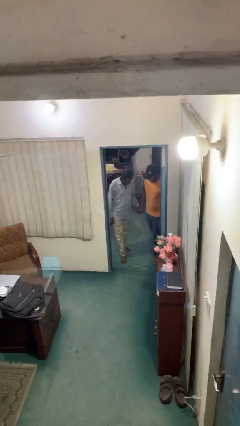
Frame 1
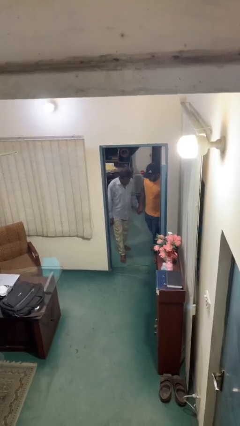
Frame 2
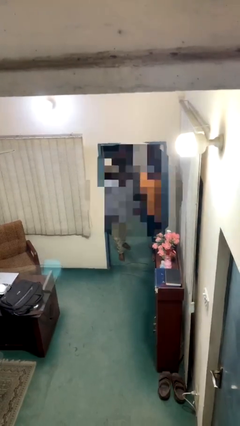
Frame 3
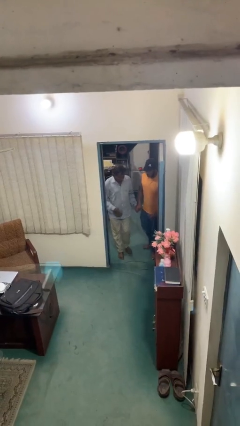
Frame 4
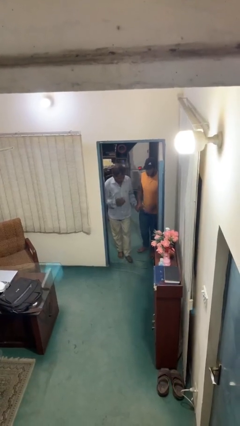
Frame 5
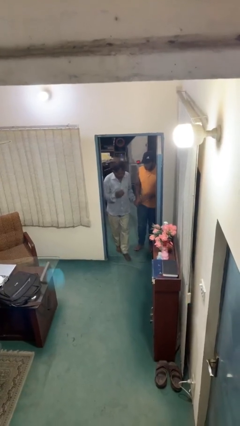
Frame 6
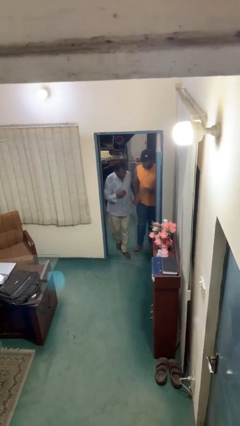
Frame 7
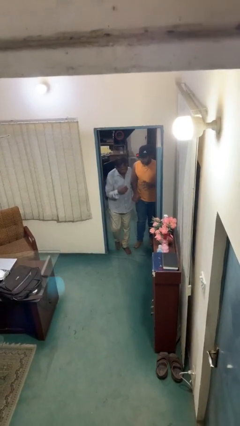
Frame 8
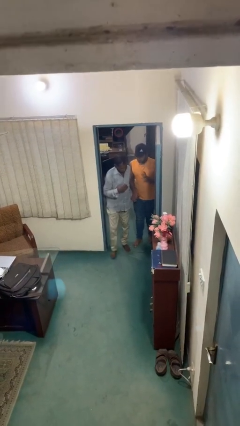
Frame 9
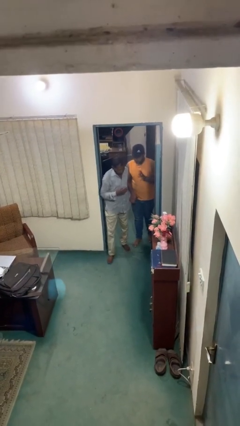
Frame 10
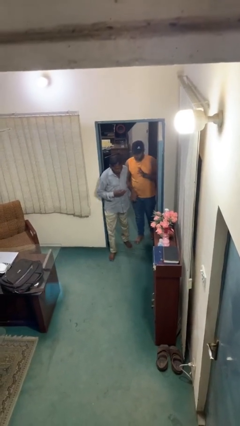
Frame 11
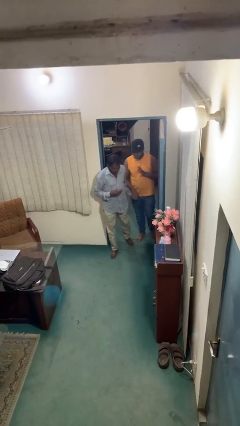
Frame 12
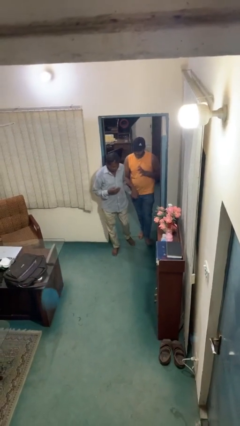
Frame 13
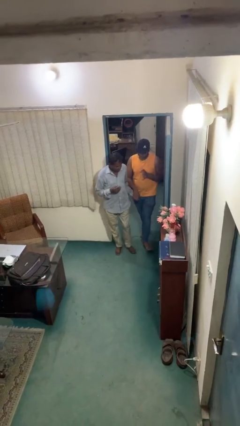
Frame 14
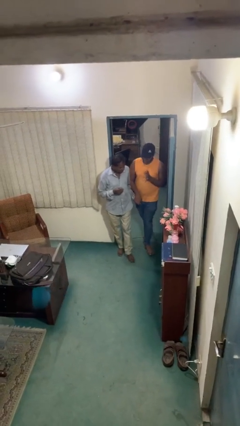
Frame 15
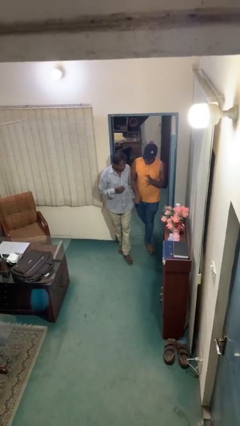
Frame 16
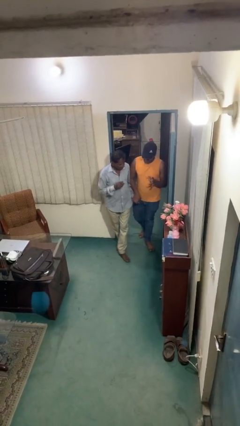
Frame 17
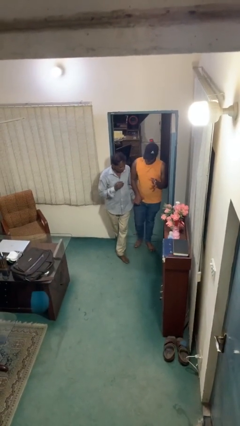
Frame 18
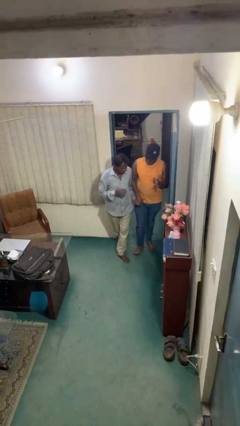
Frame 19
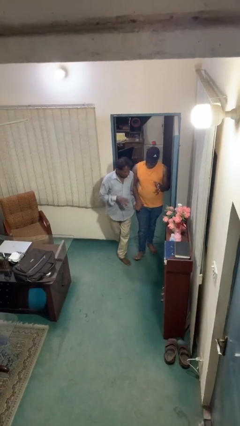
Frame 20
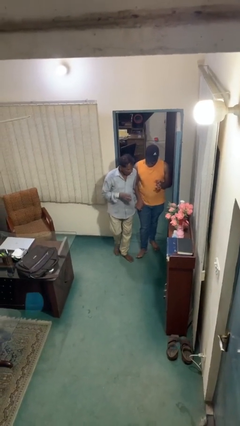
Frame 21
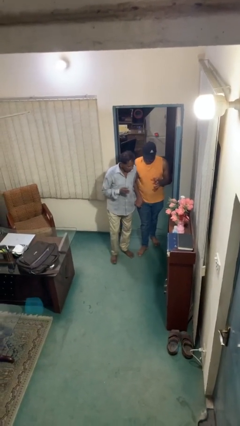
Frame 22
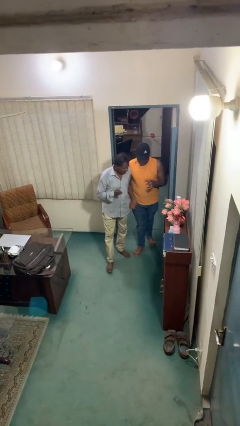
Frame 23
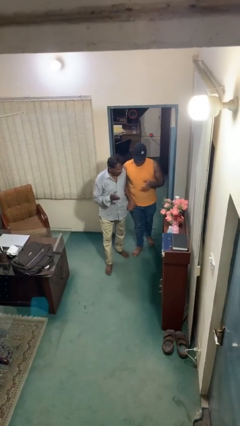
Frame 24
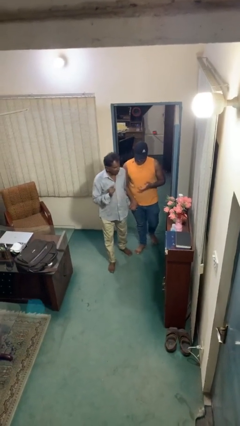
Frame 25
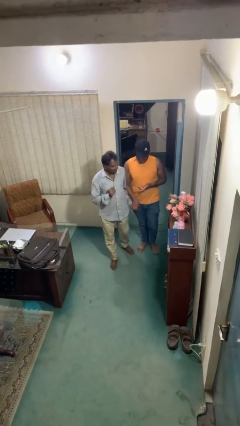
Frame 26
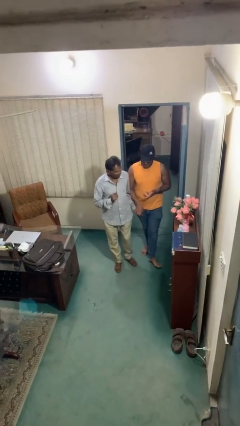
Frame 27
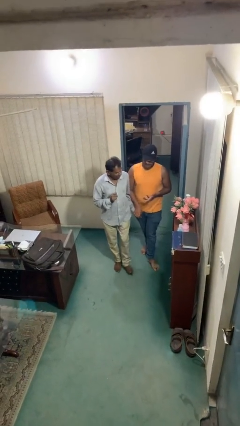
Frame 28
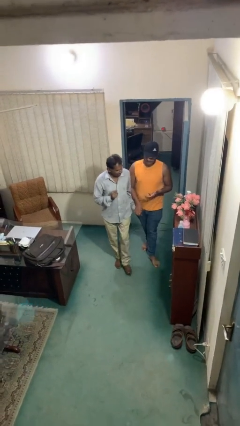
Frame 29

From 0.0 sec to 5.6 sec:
person holds hand

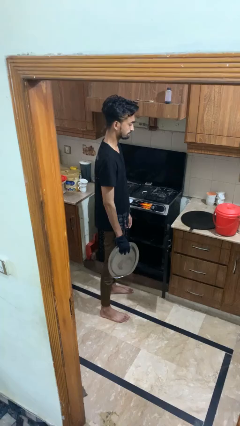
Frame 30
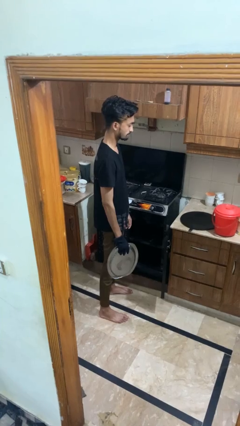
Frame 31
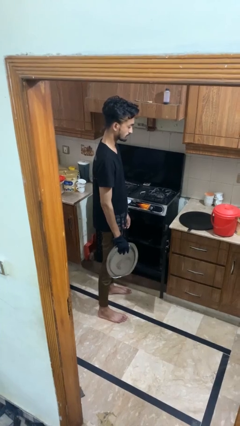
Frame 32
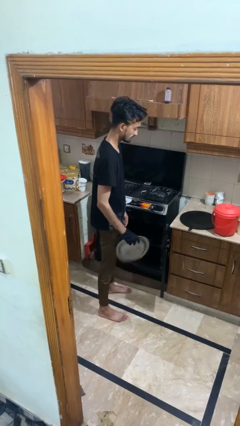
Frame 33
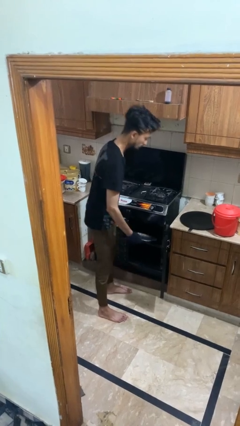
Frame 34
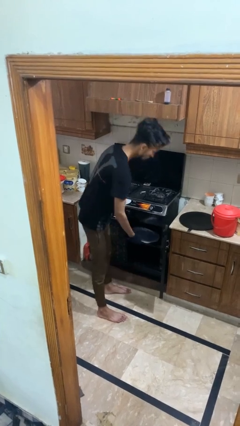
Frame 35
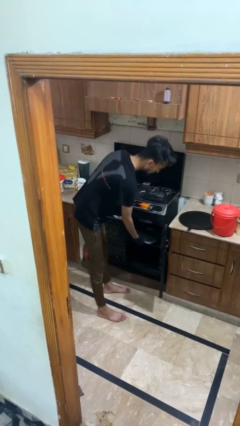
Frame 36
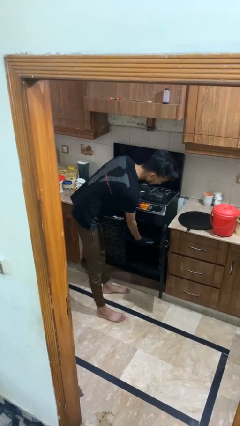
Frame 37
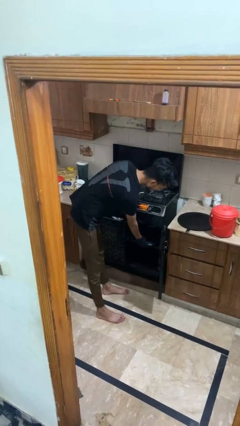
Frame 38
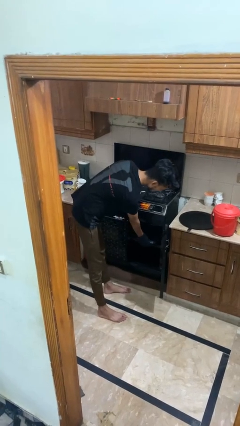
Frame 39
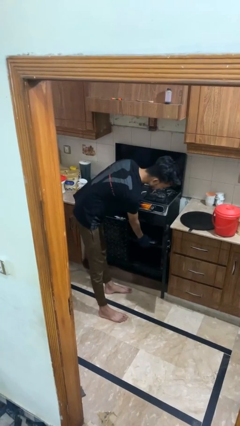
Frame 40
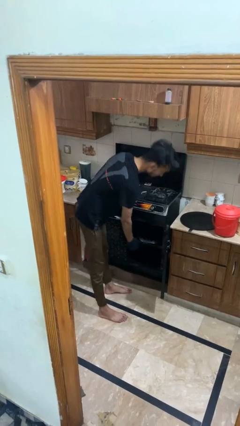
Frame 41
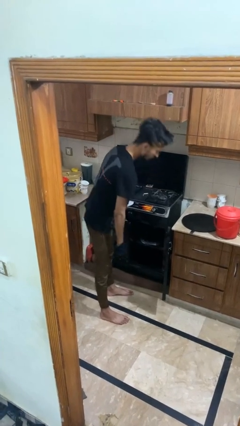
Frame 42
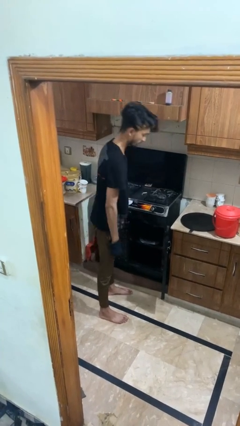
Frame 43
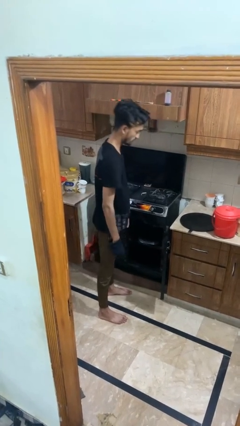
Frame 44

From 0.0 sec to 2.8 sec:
person puts object into oven

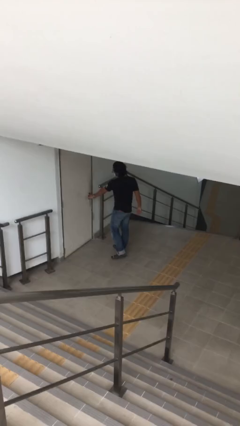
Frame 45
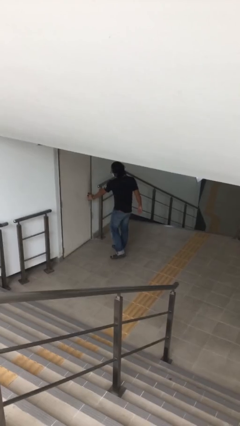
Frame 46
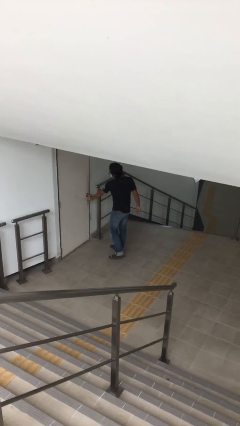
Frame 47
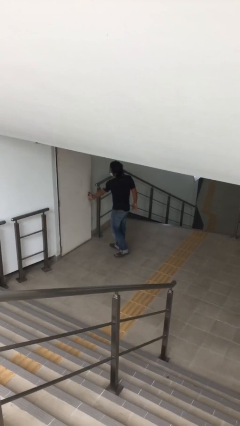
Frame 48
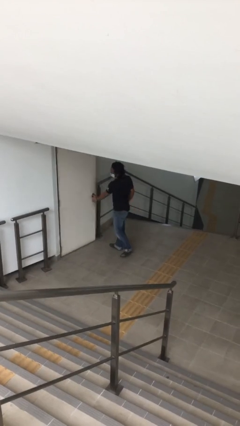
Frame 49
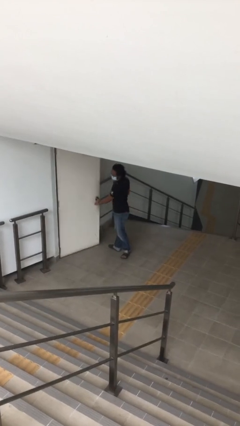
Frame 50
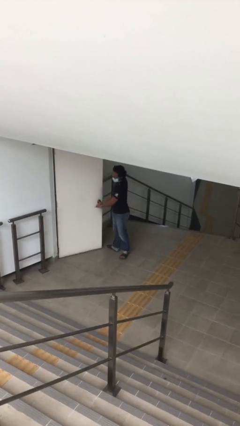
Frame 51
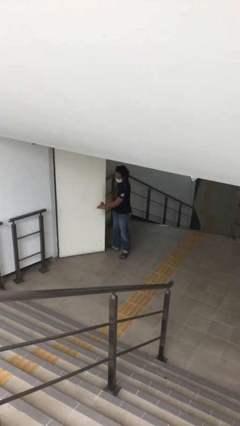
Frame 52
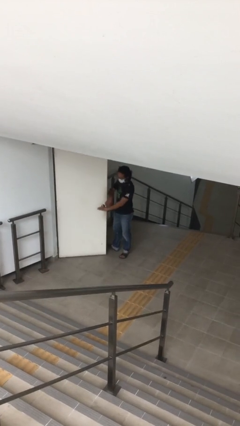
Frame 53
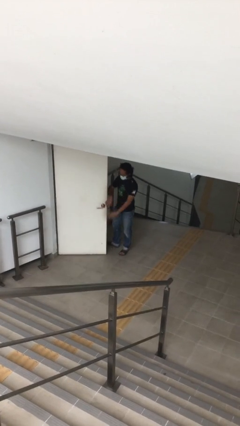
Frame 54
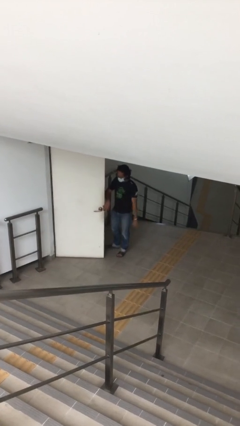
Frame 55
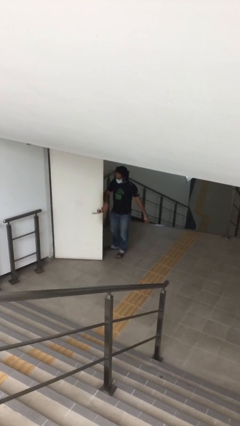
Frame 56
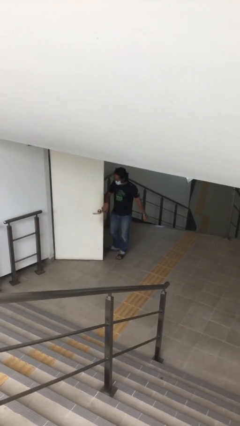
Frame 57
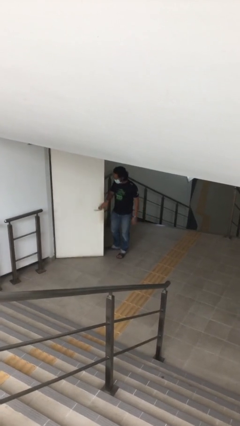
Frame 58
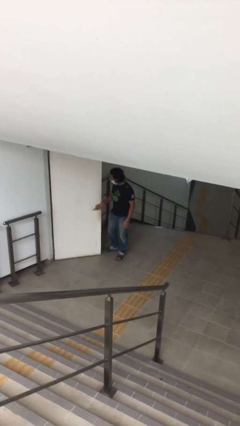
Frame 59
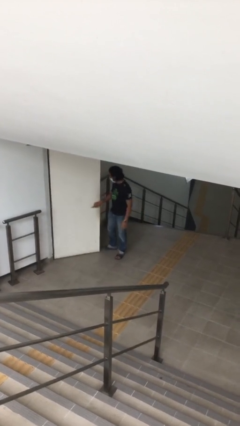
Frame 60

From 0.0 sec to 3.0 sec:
person opens facility door

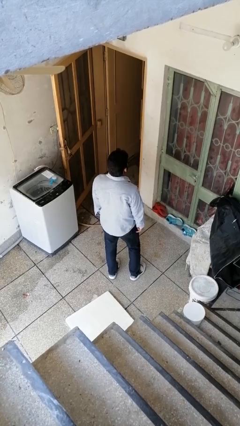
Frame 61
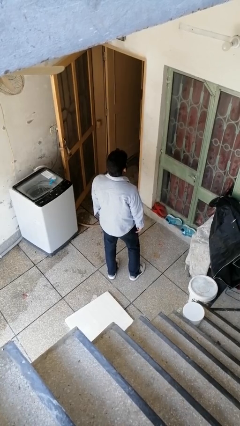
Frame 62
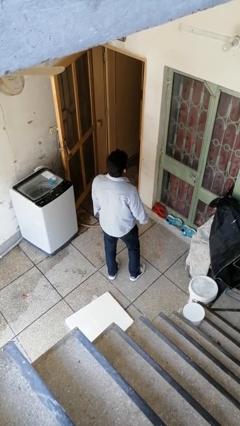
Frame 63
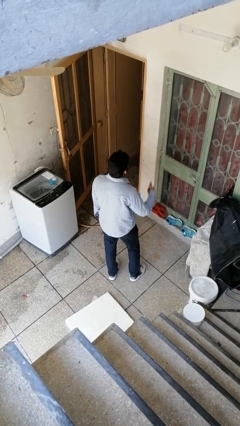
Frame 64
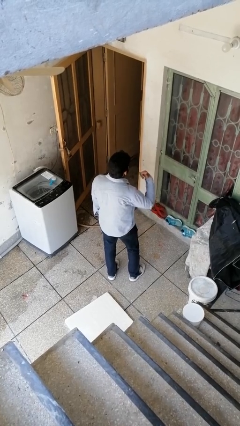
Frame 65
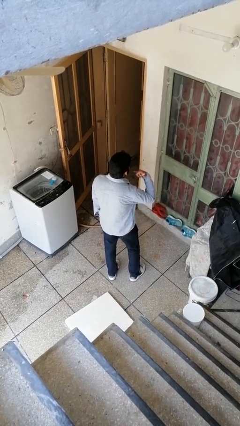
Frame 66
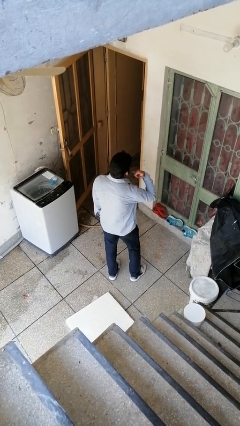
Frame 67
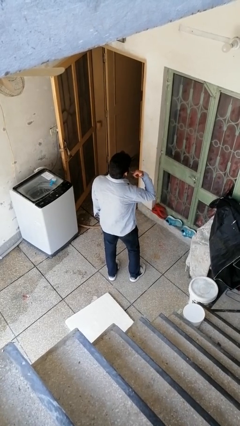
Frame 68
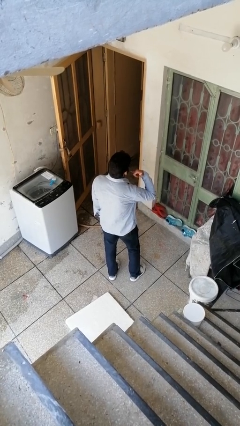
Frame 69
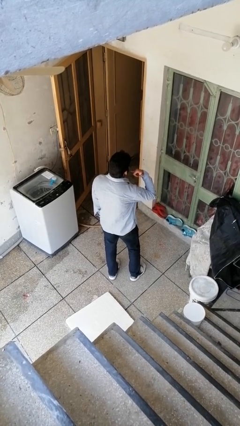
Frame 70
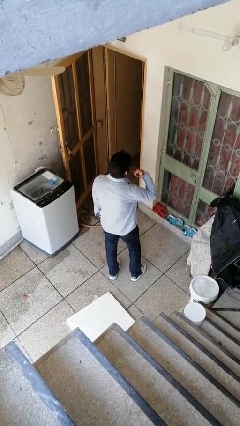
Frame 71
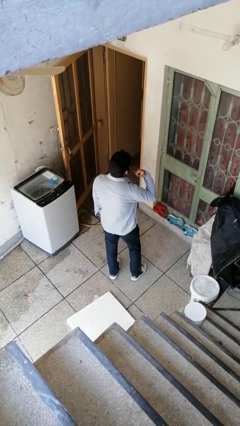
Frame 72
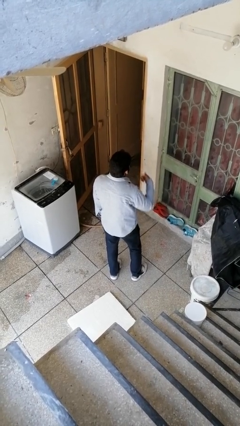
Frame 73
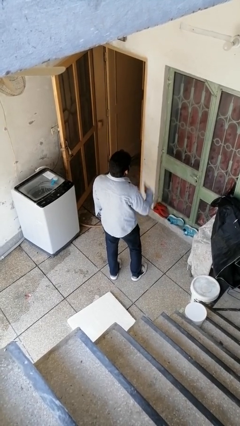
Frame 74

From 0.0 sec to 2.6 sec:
person gestures call me

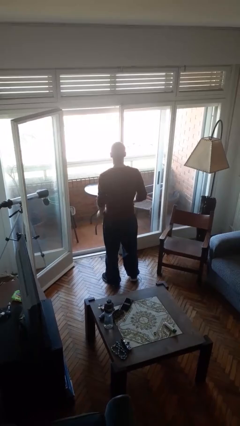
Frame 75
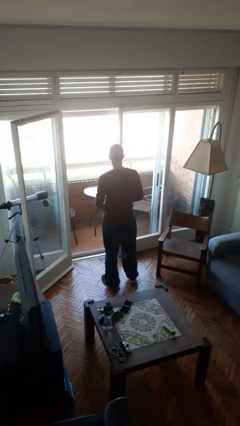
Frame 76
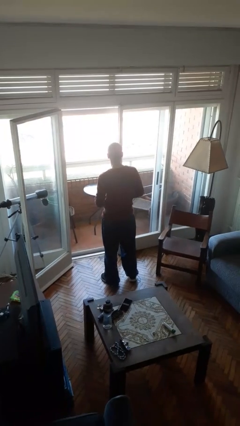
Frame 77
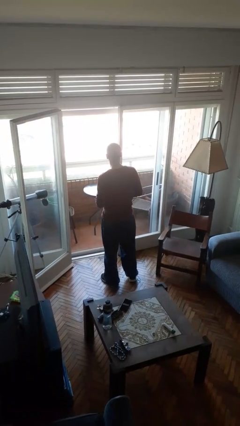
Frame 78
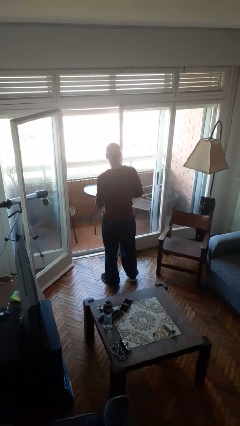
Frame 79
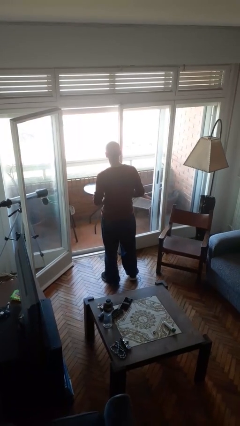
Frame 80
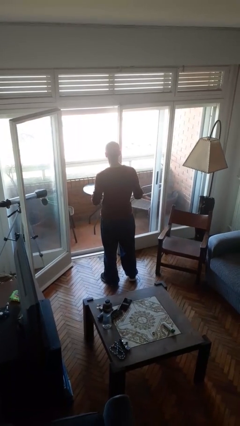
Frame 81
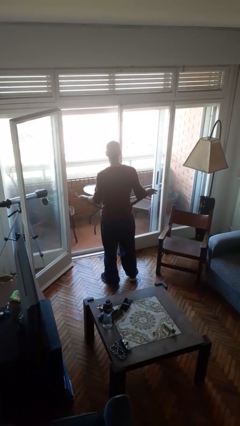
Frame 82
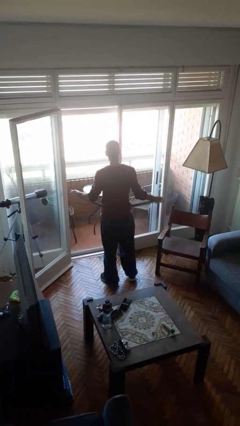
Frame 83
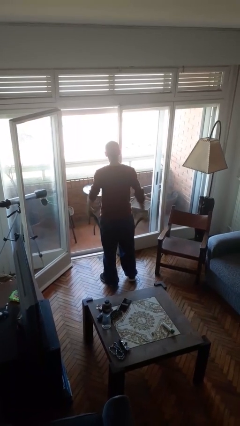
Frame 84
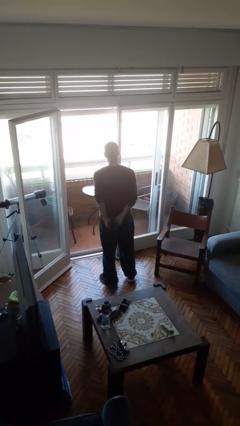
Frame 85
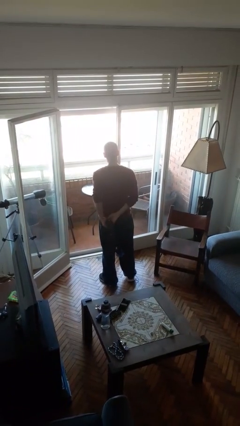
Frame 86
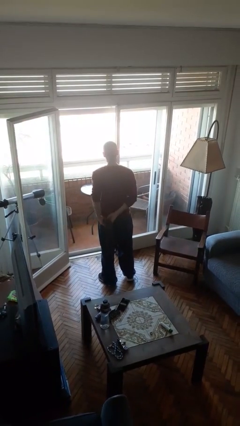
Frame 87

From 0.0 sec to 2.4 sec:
person takes off belt

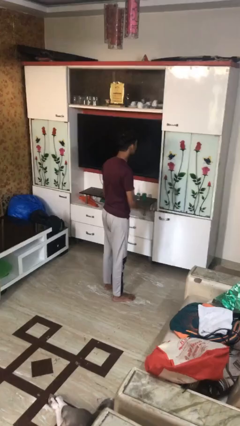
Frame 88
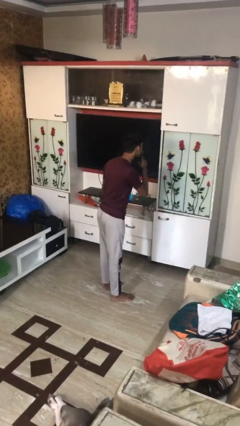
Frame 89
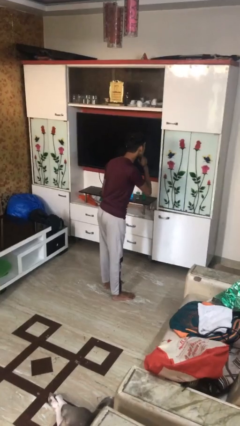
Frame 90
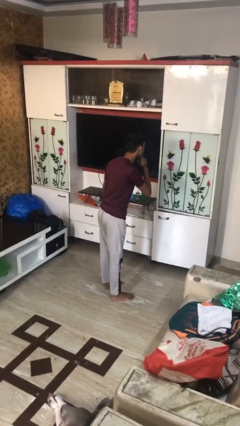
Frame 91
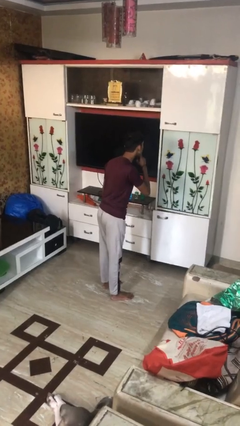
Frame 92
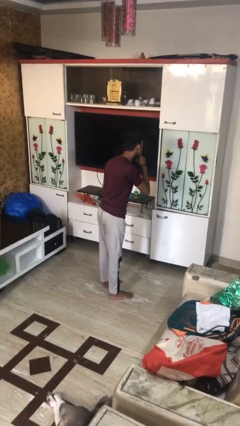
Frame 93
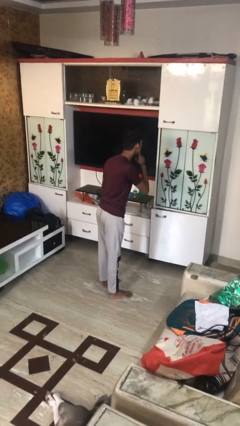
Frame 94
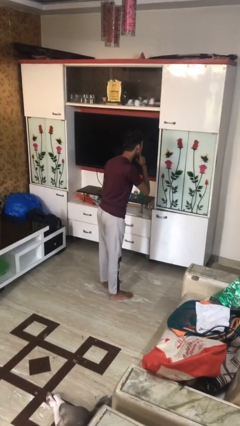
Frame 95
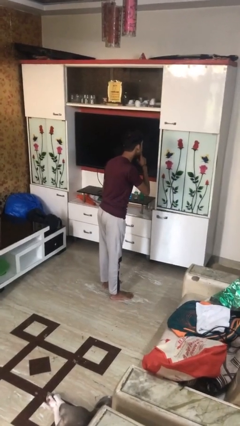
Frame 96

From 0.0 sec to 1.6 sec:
person gestures be quiet
